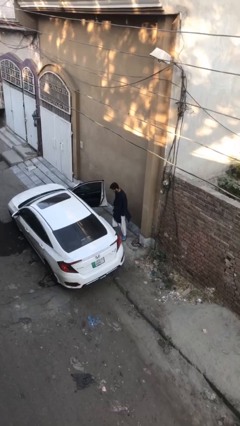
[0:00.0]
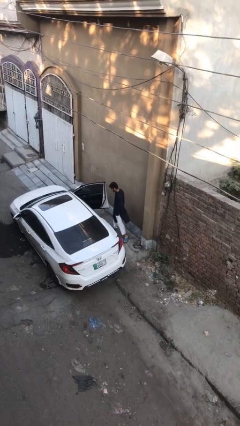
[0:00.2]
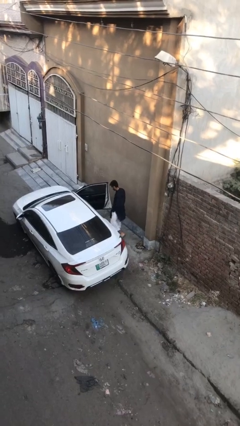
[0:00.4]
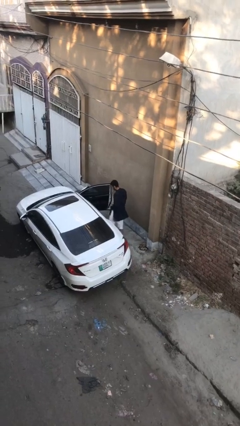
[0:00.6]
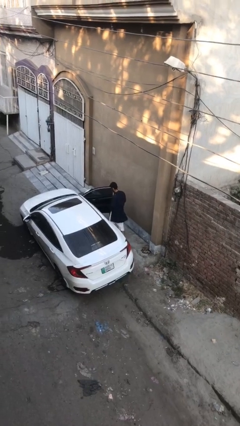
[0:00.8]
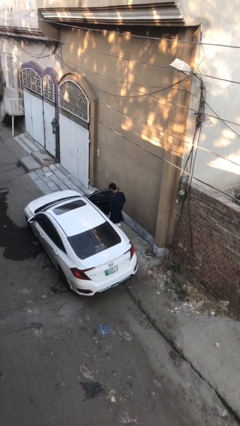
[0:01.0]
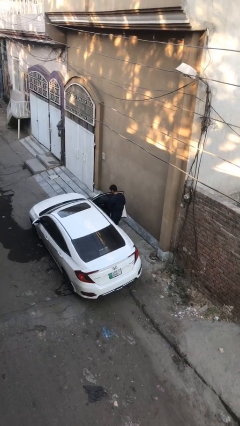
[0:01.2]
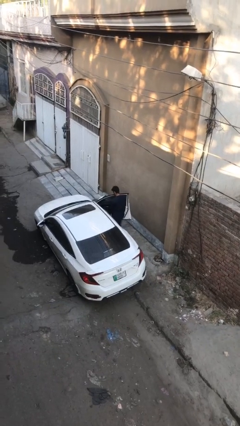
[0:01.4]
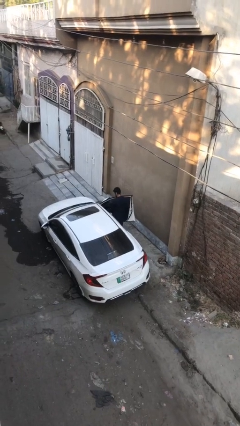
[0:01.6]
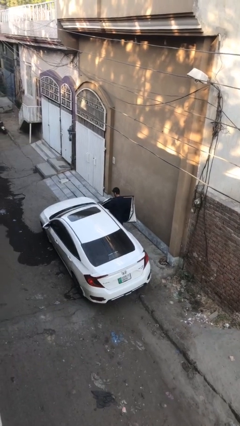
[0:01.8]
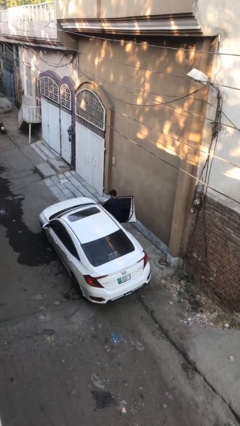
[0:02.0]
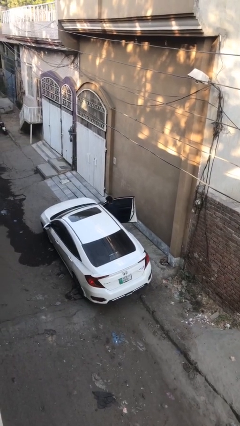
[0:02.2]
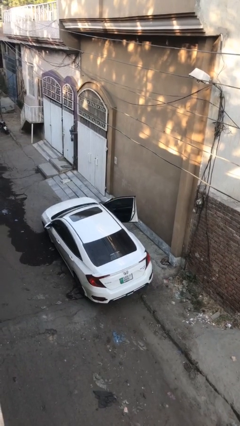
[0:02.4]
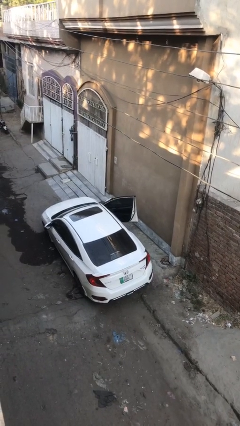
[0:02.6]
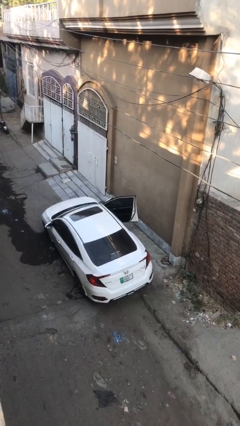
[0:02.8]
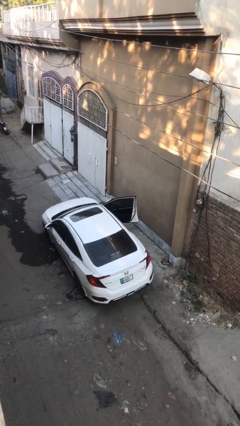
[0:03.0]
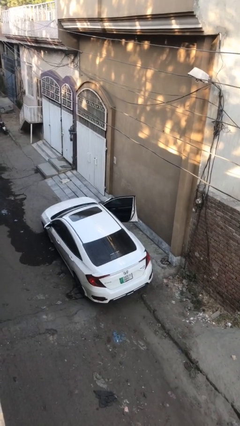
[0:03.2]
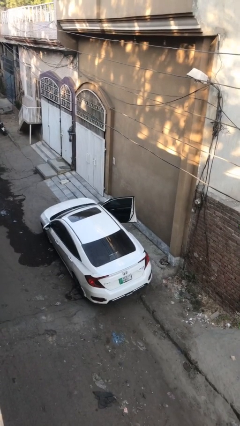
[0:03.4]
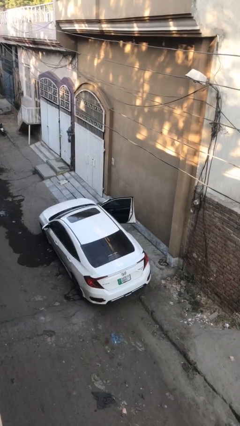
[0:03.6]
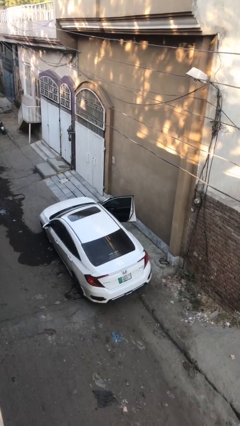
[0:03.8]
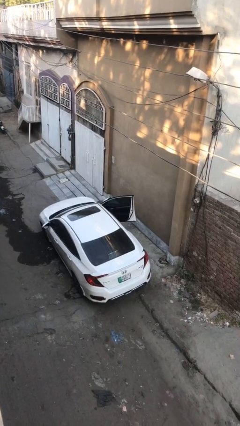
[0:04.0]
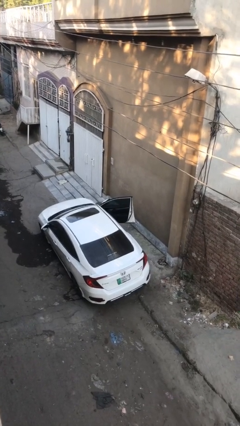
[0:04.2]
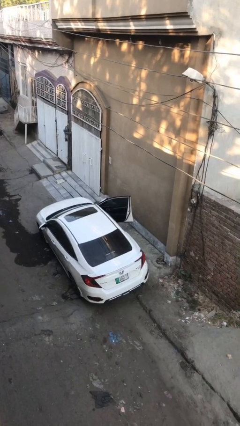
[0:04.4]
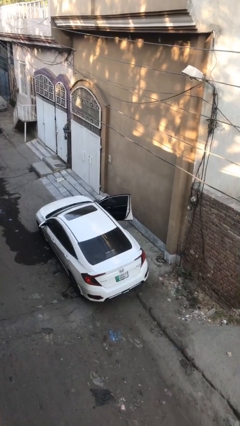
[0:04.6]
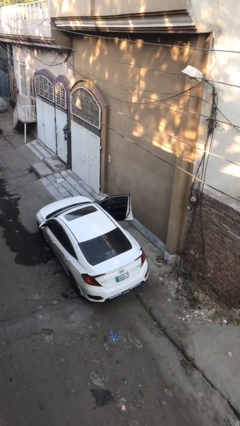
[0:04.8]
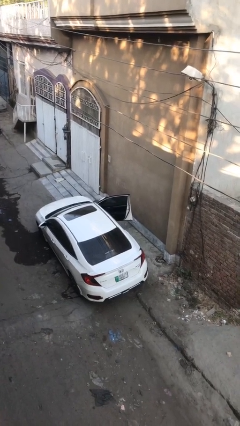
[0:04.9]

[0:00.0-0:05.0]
person enters car

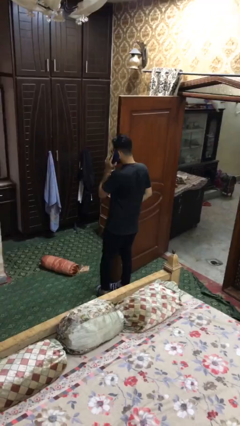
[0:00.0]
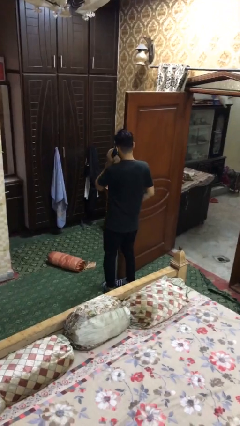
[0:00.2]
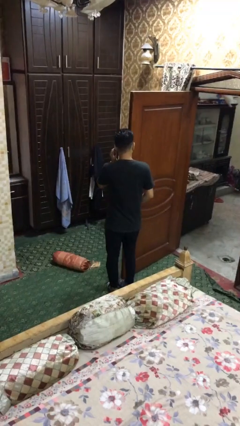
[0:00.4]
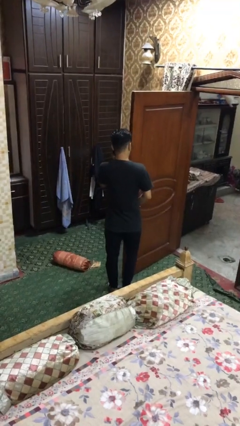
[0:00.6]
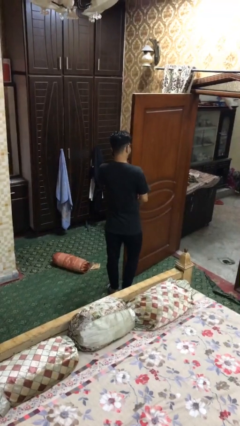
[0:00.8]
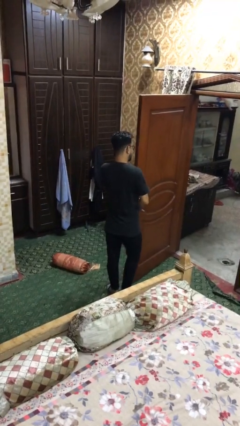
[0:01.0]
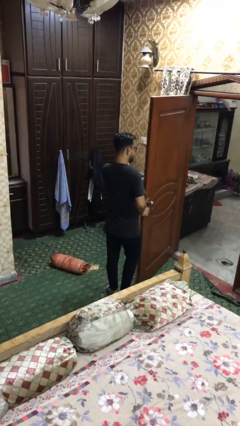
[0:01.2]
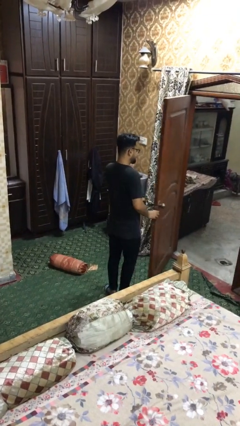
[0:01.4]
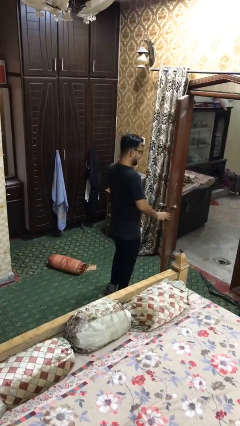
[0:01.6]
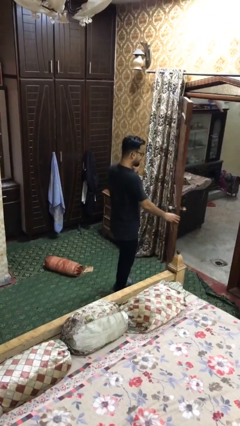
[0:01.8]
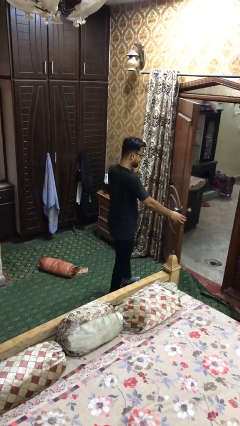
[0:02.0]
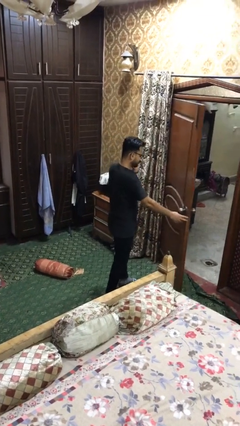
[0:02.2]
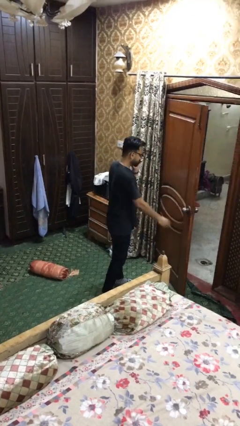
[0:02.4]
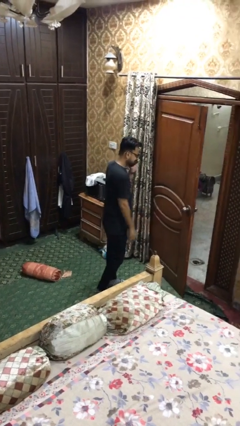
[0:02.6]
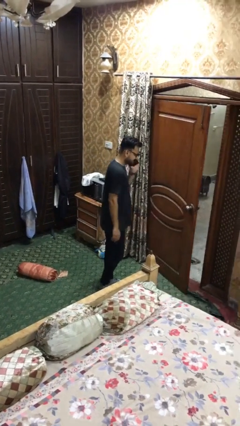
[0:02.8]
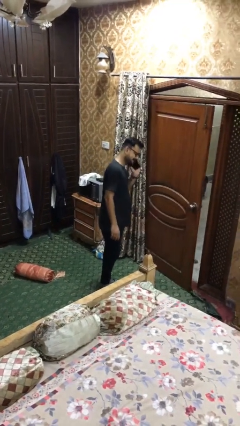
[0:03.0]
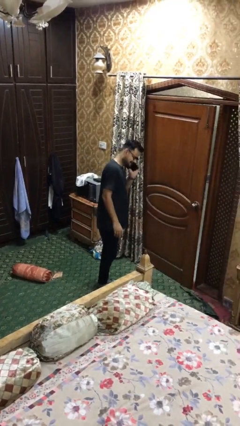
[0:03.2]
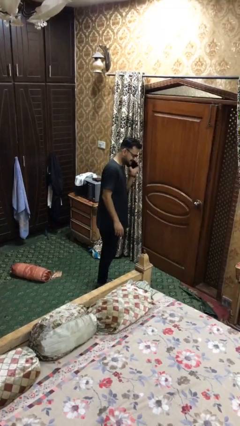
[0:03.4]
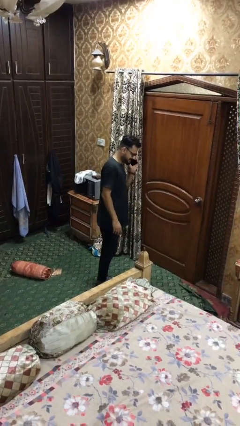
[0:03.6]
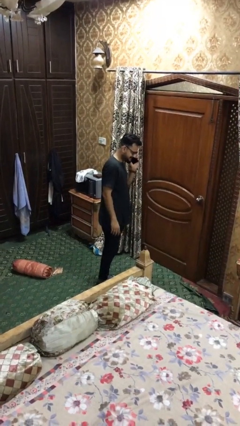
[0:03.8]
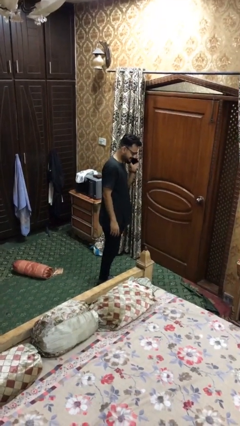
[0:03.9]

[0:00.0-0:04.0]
person closes facility door

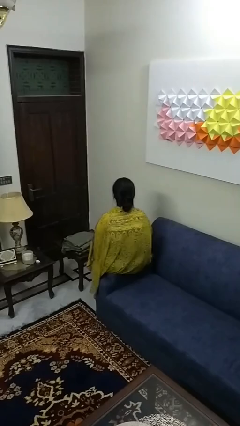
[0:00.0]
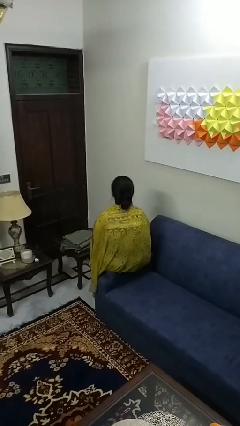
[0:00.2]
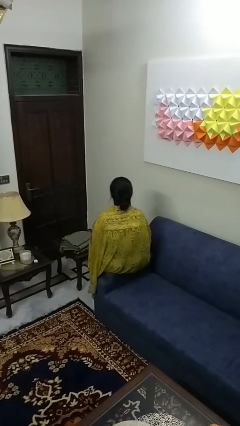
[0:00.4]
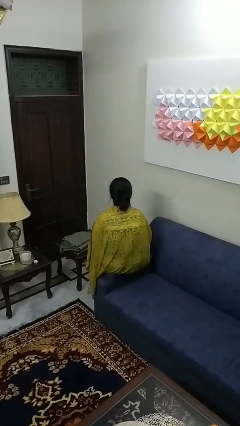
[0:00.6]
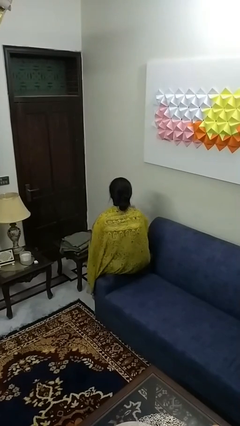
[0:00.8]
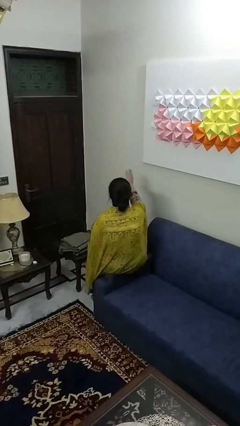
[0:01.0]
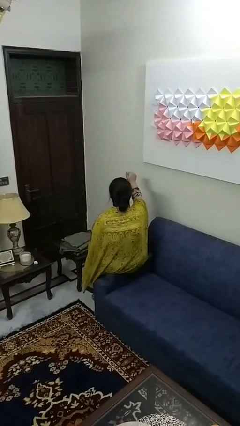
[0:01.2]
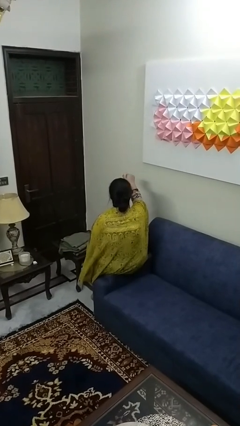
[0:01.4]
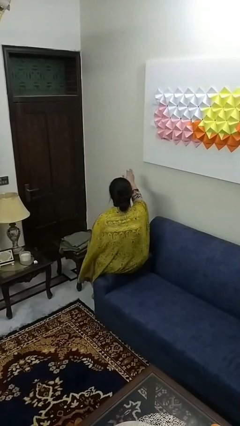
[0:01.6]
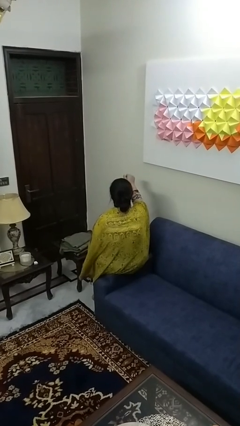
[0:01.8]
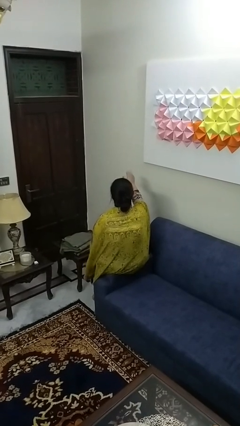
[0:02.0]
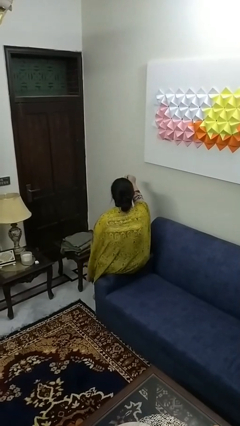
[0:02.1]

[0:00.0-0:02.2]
person gestures come here

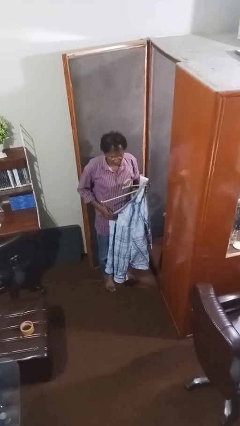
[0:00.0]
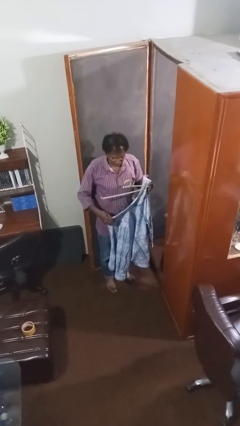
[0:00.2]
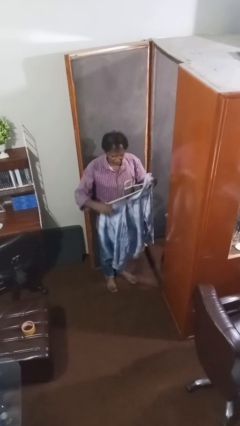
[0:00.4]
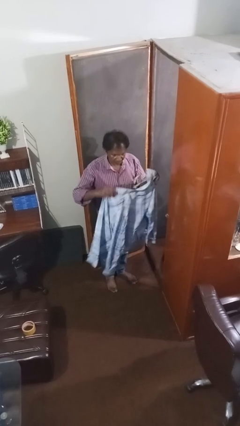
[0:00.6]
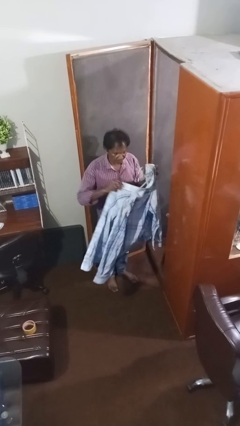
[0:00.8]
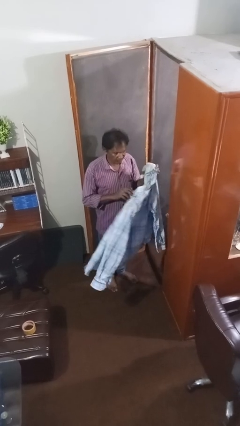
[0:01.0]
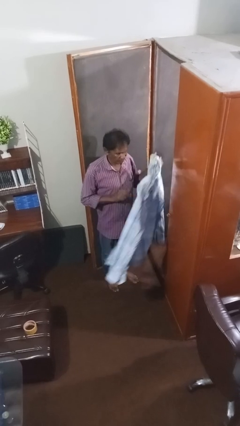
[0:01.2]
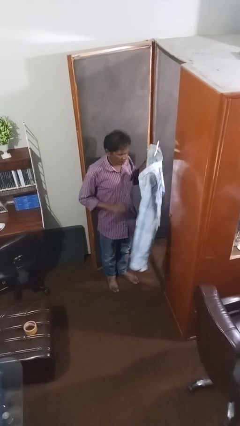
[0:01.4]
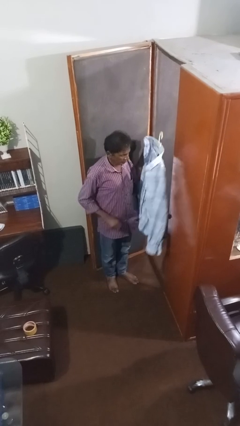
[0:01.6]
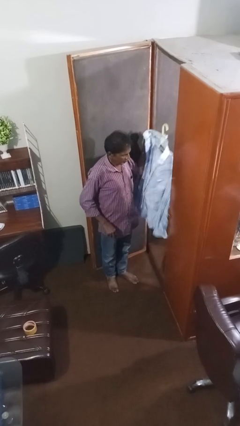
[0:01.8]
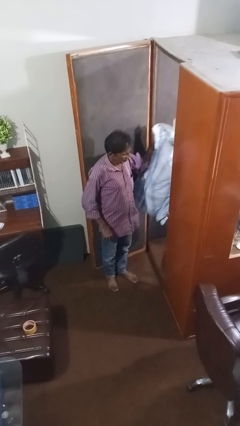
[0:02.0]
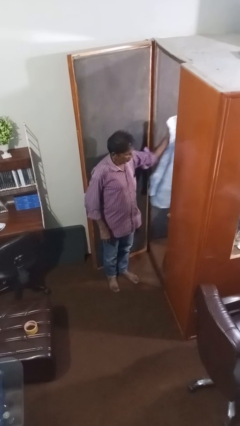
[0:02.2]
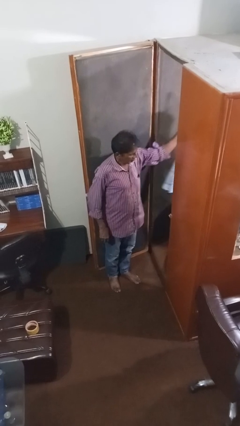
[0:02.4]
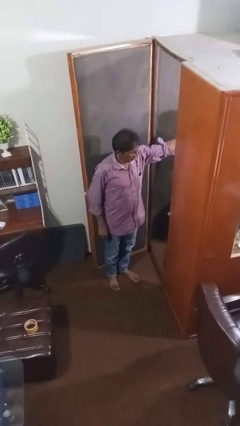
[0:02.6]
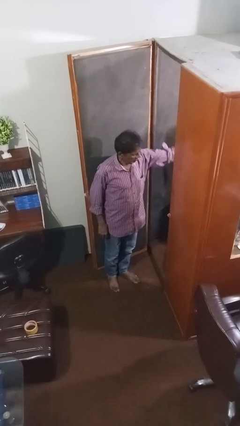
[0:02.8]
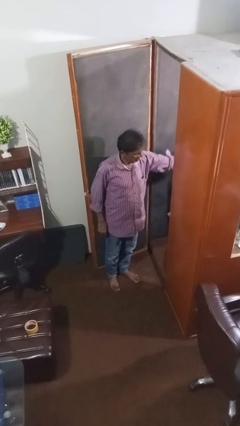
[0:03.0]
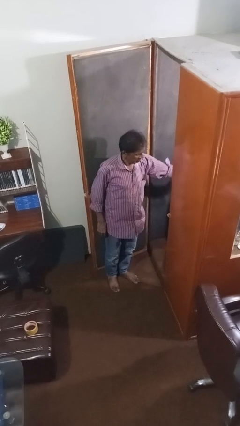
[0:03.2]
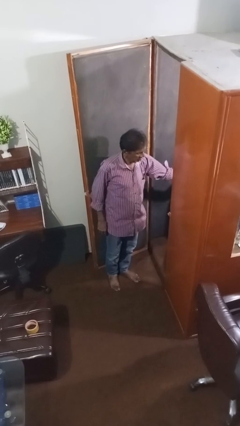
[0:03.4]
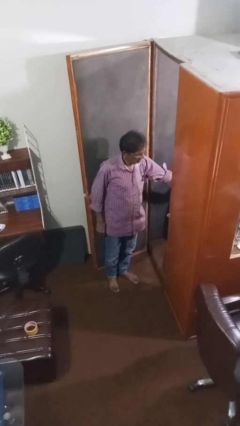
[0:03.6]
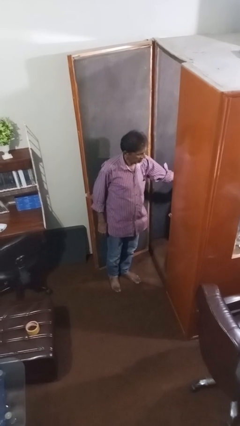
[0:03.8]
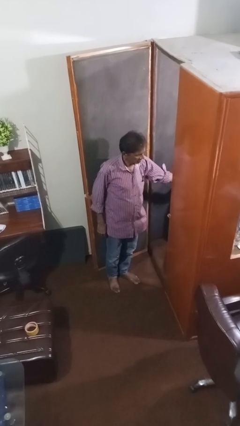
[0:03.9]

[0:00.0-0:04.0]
person puts clothes into closet

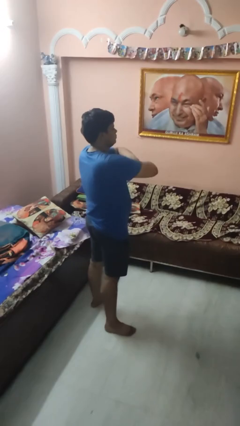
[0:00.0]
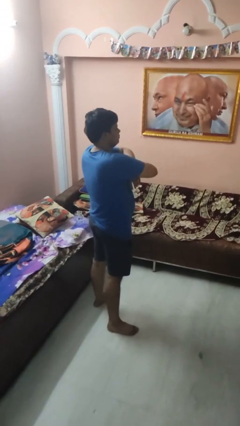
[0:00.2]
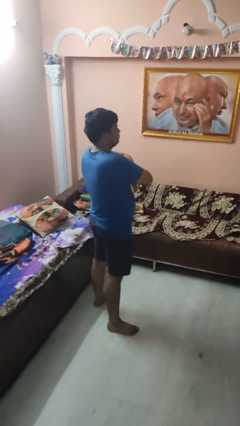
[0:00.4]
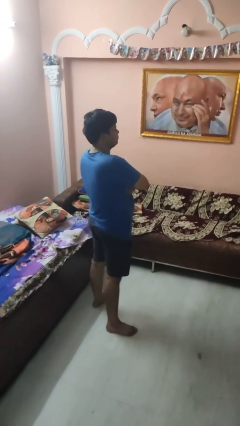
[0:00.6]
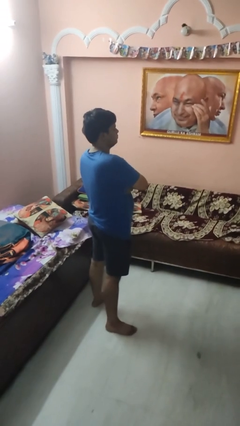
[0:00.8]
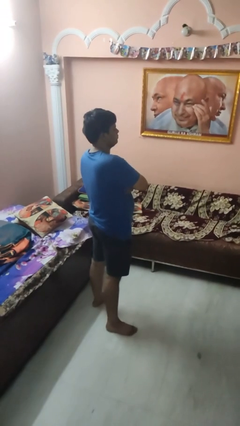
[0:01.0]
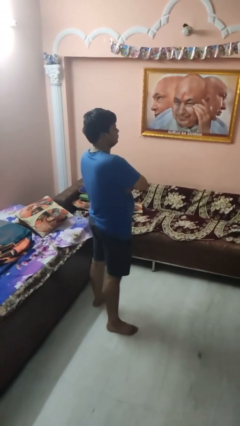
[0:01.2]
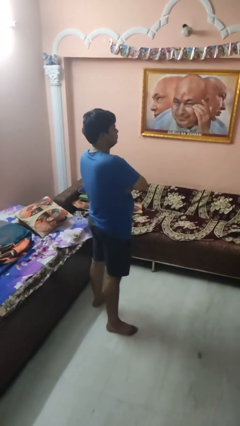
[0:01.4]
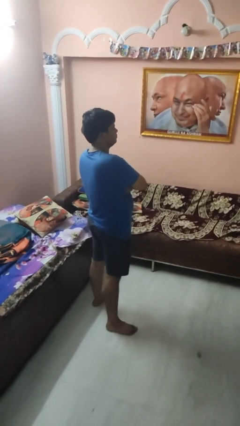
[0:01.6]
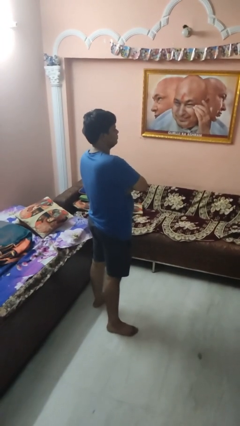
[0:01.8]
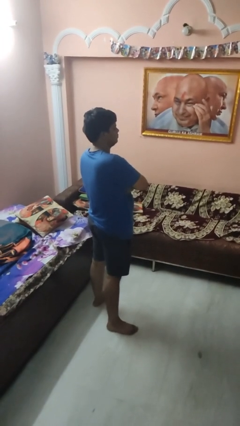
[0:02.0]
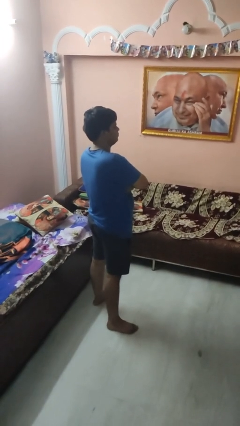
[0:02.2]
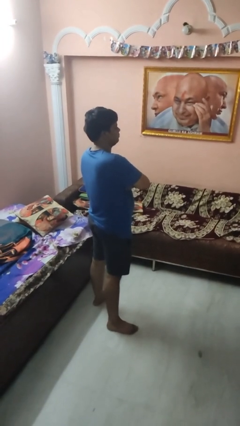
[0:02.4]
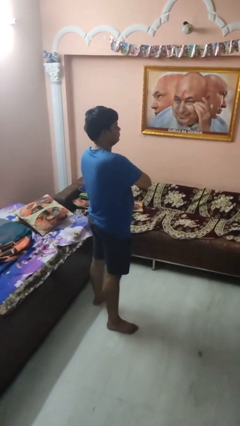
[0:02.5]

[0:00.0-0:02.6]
person crosses arms
